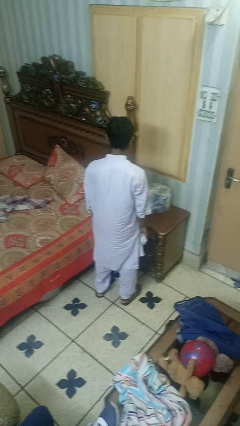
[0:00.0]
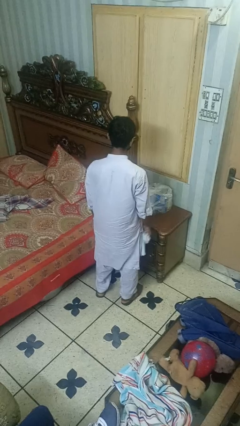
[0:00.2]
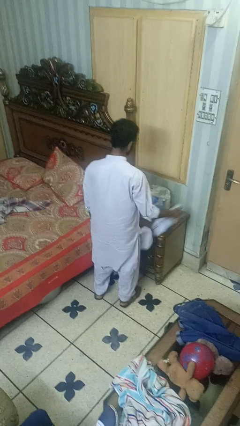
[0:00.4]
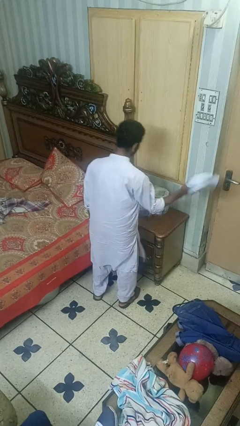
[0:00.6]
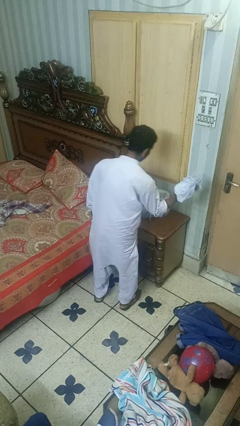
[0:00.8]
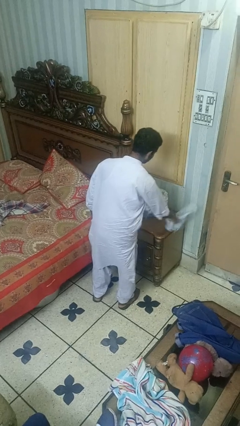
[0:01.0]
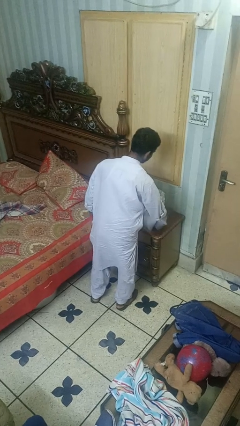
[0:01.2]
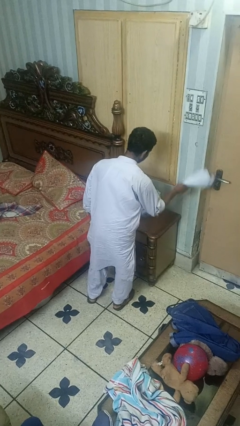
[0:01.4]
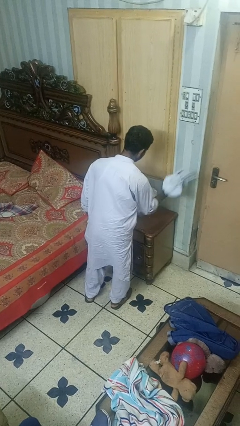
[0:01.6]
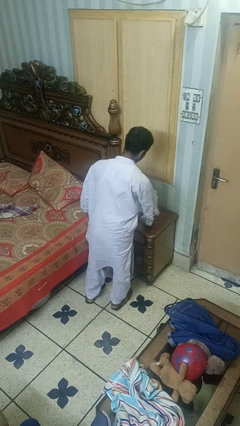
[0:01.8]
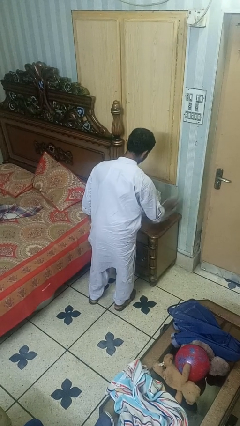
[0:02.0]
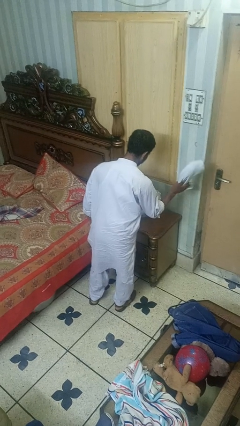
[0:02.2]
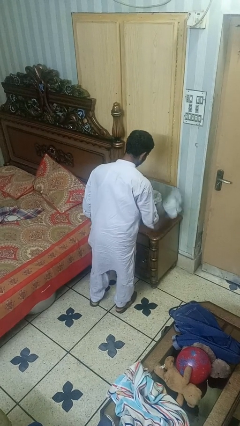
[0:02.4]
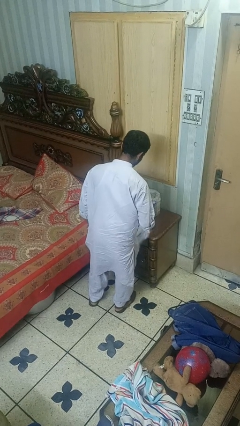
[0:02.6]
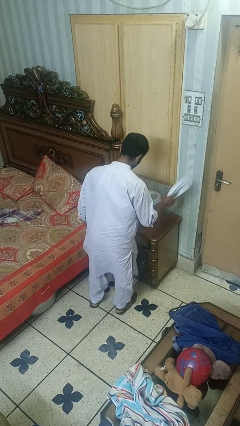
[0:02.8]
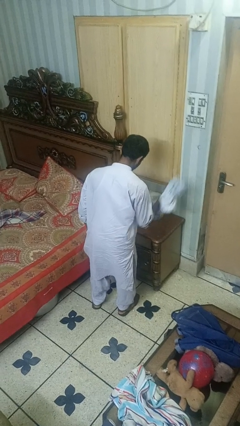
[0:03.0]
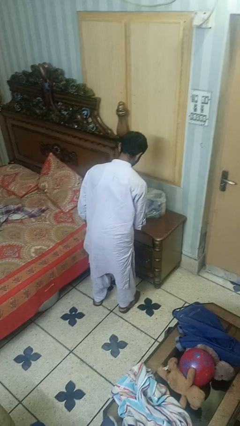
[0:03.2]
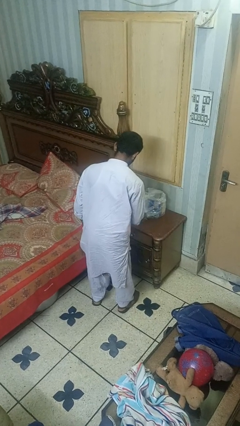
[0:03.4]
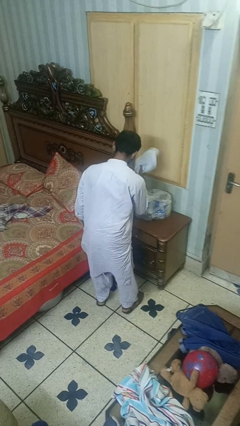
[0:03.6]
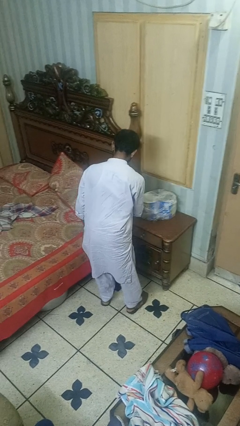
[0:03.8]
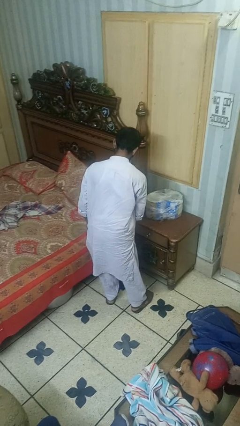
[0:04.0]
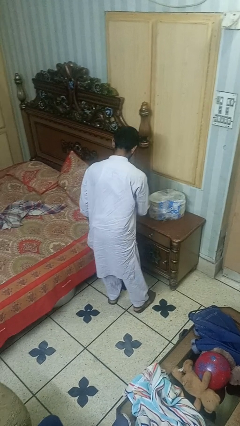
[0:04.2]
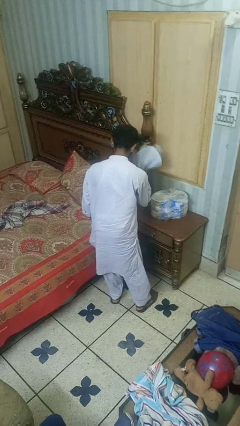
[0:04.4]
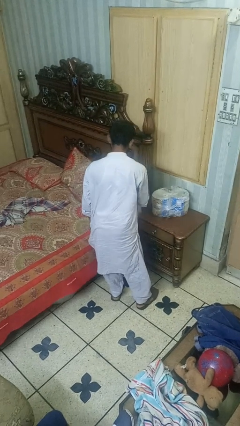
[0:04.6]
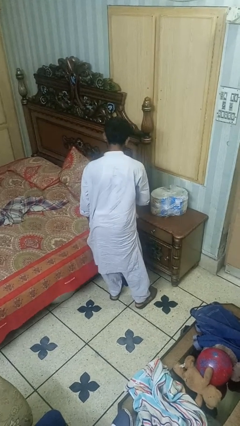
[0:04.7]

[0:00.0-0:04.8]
person dusts furniture

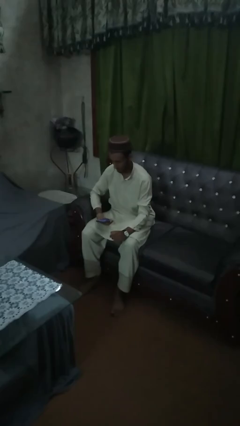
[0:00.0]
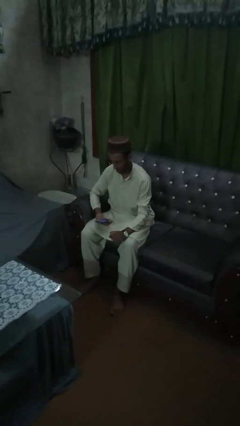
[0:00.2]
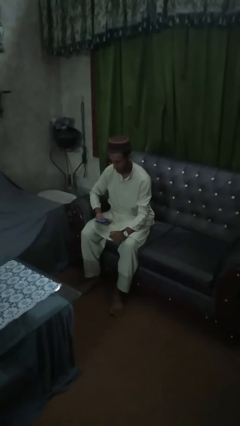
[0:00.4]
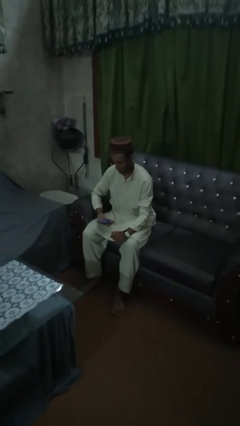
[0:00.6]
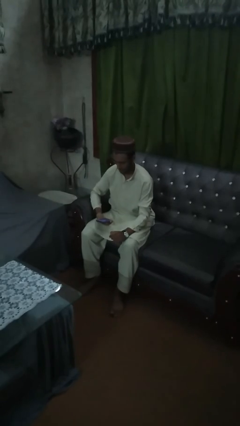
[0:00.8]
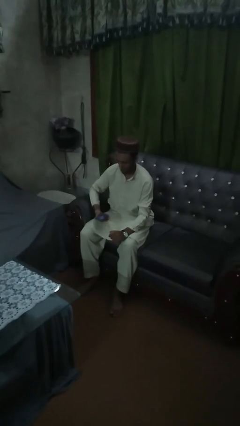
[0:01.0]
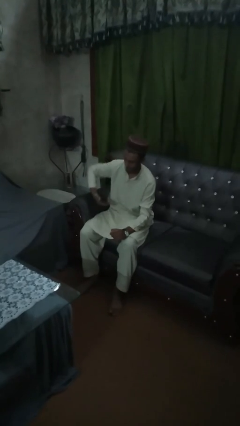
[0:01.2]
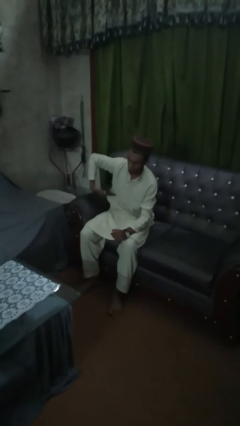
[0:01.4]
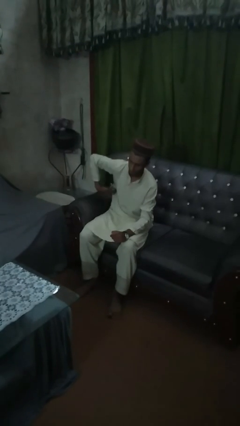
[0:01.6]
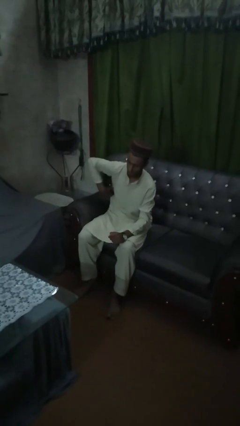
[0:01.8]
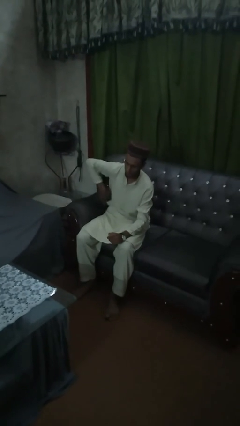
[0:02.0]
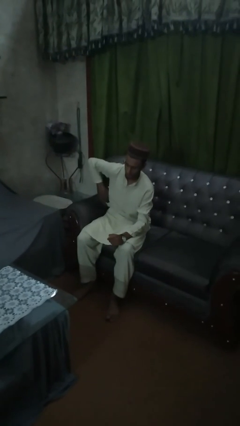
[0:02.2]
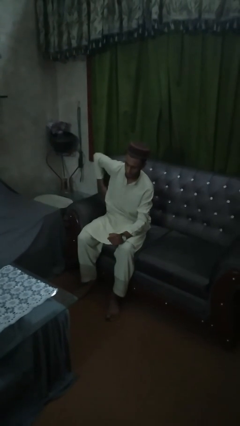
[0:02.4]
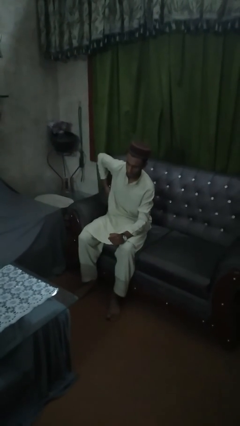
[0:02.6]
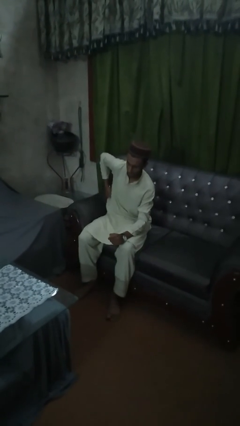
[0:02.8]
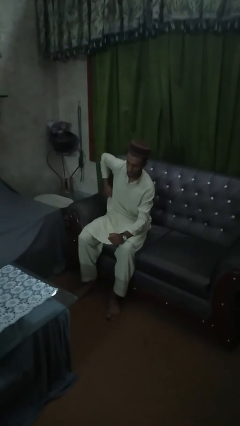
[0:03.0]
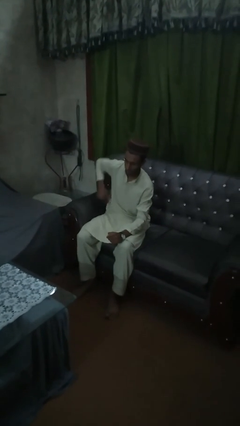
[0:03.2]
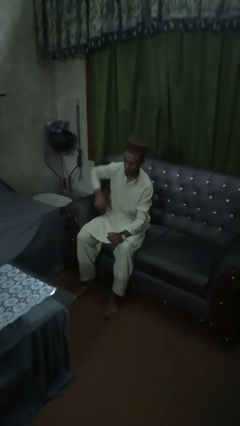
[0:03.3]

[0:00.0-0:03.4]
person puts phone into pocket

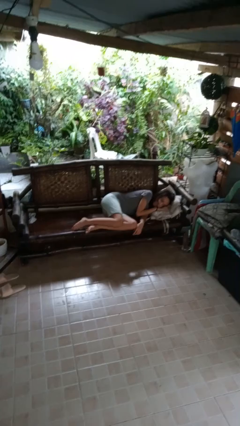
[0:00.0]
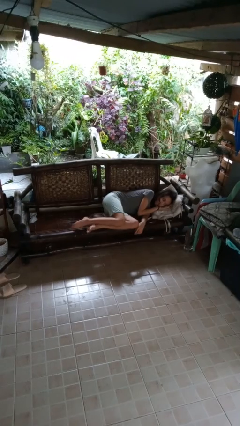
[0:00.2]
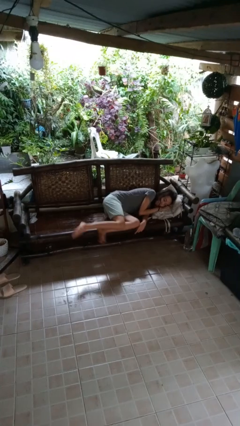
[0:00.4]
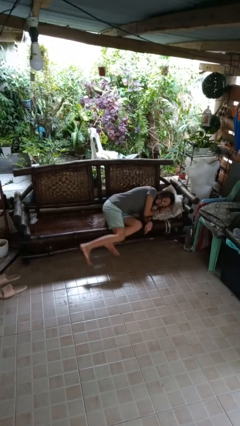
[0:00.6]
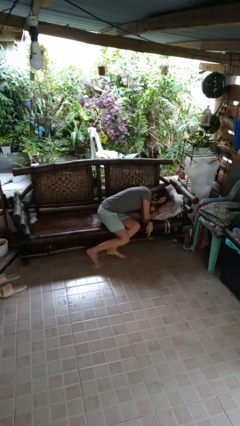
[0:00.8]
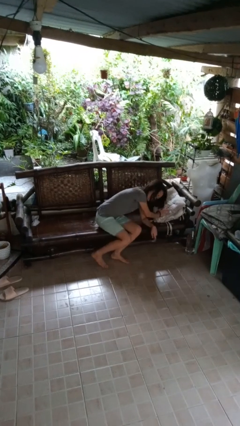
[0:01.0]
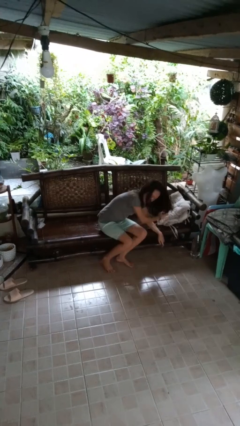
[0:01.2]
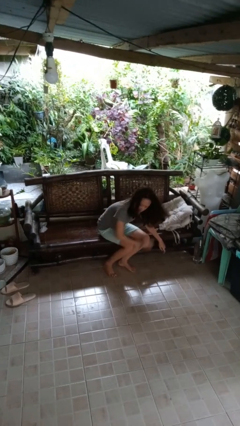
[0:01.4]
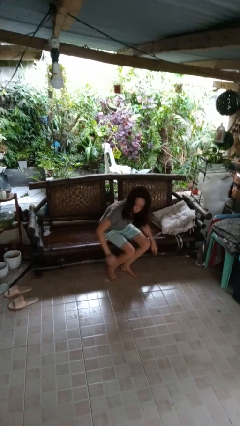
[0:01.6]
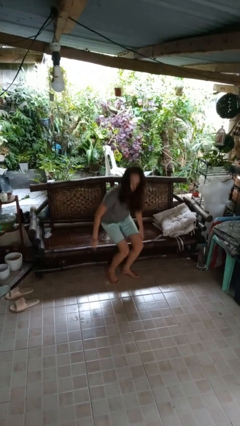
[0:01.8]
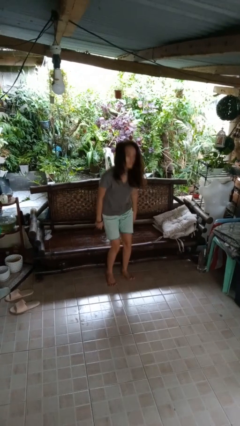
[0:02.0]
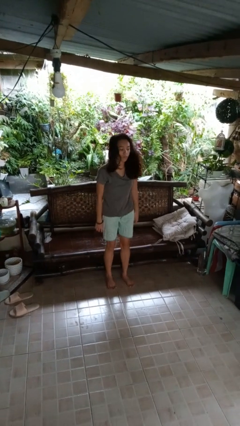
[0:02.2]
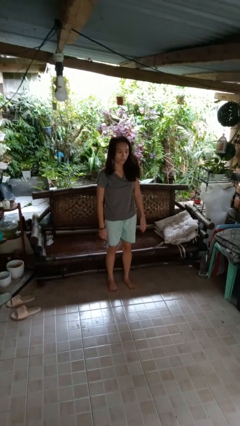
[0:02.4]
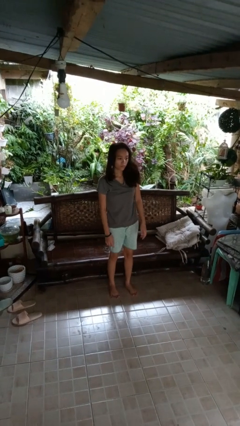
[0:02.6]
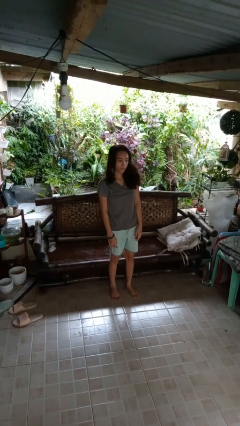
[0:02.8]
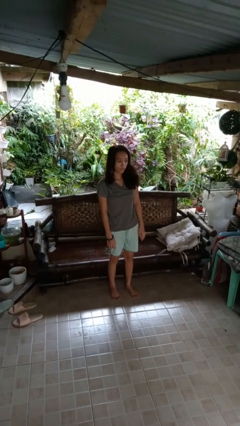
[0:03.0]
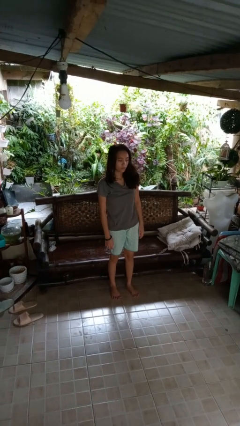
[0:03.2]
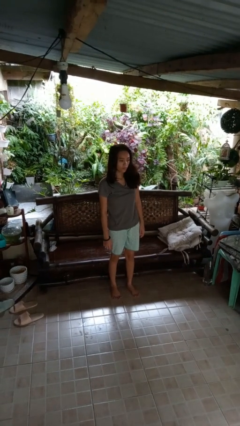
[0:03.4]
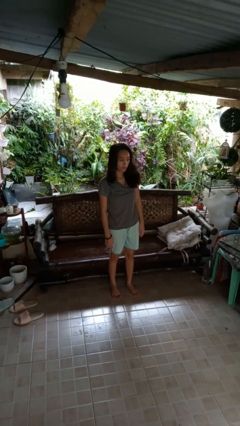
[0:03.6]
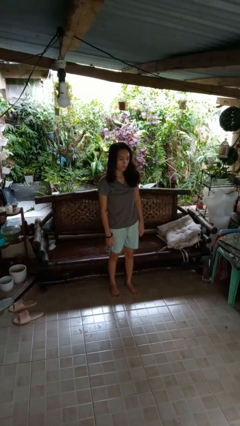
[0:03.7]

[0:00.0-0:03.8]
person stands up

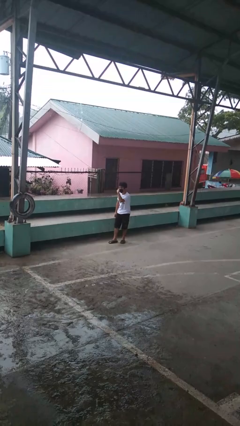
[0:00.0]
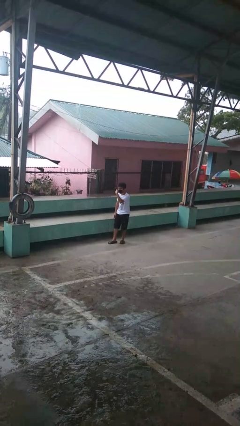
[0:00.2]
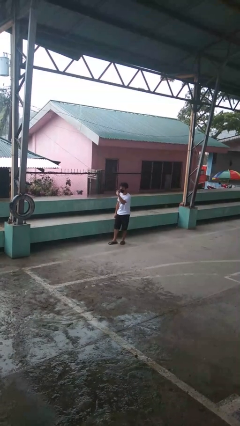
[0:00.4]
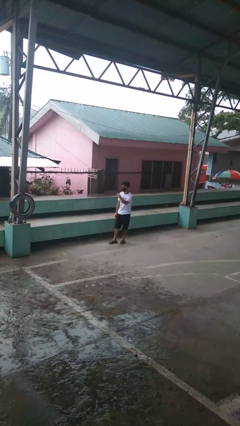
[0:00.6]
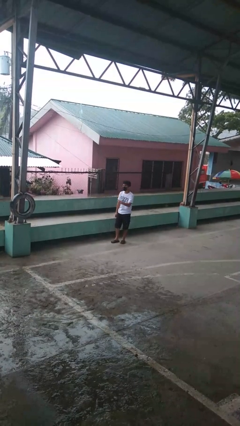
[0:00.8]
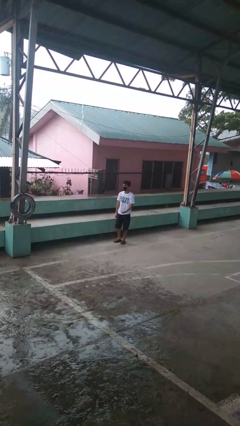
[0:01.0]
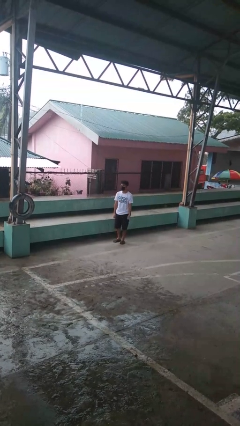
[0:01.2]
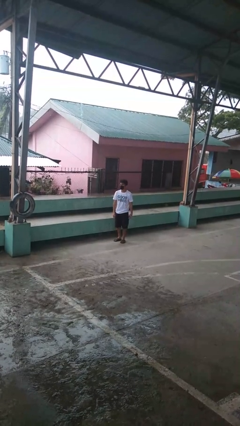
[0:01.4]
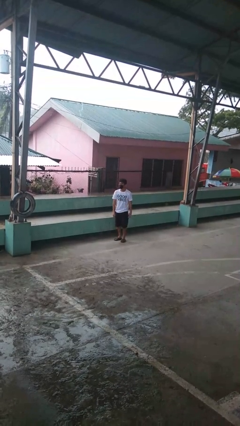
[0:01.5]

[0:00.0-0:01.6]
person gestures watch closely

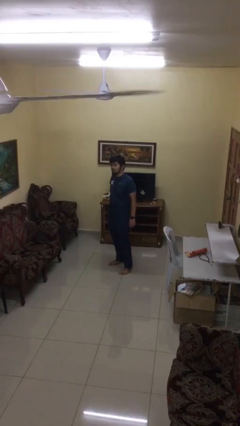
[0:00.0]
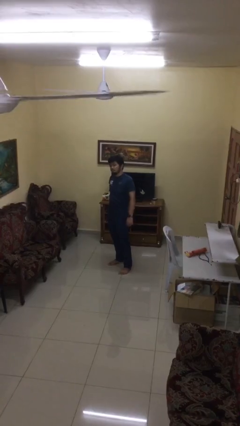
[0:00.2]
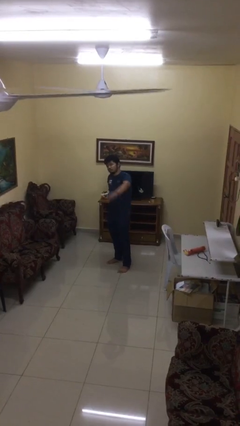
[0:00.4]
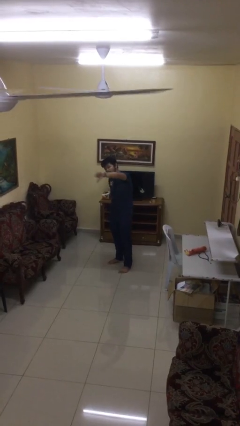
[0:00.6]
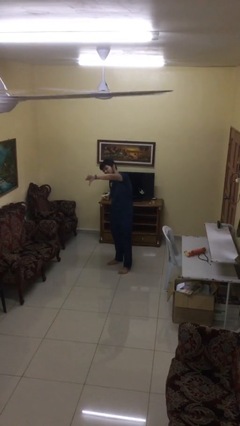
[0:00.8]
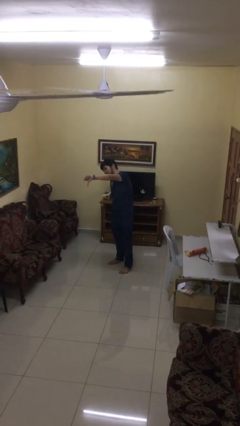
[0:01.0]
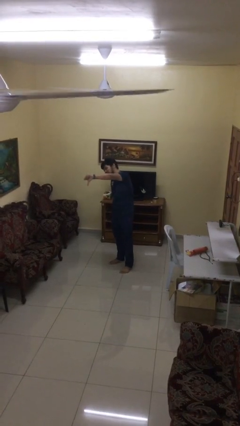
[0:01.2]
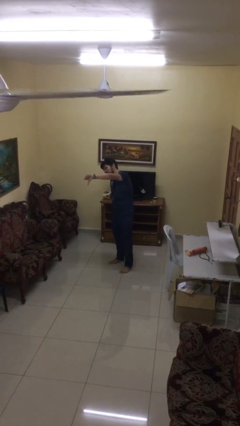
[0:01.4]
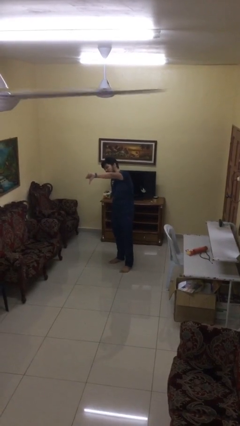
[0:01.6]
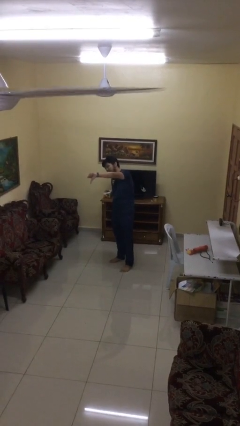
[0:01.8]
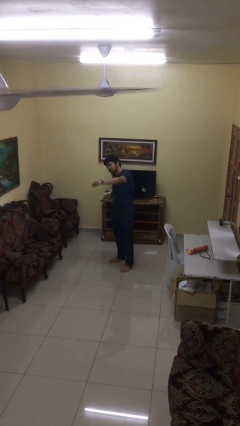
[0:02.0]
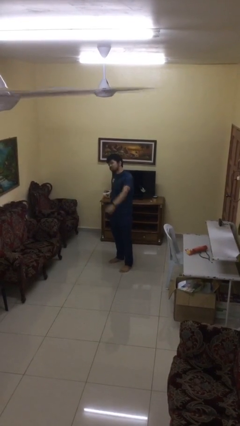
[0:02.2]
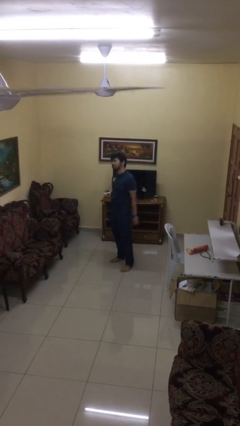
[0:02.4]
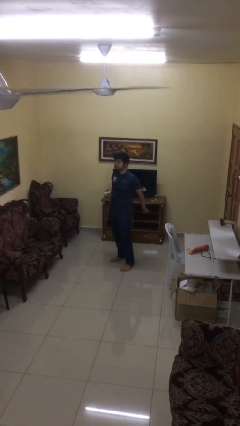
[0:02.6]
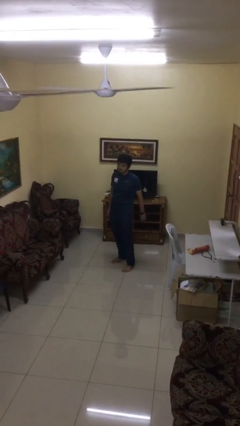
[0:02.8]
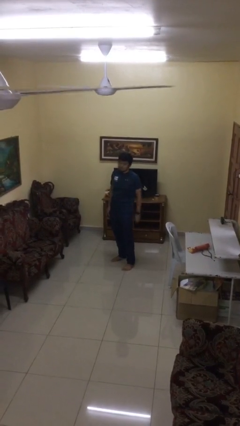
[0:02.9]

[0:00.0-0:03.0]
person gestures thumbs down

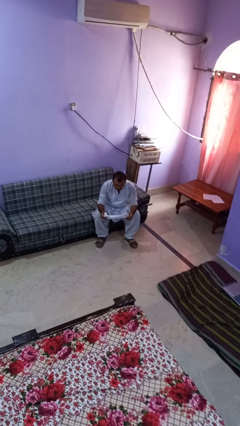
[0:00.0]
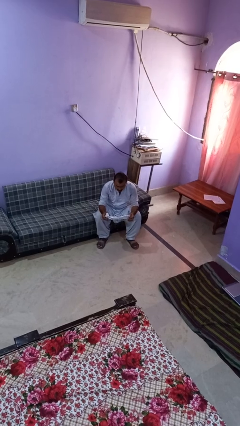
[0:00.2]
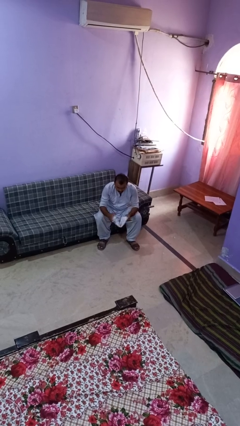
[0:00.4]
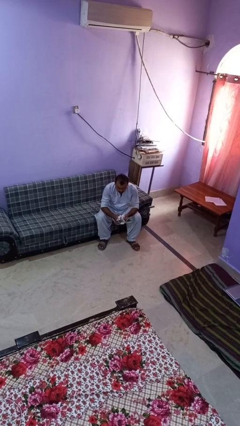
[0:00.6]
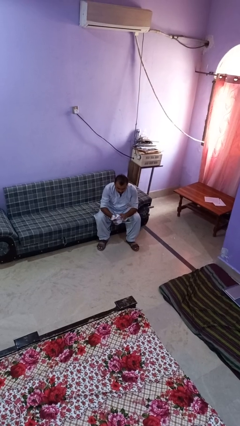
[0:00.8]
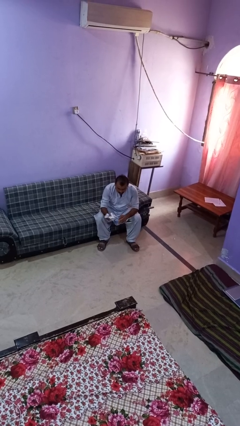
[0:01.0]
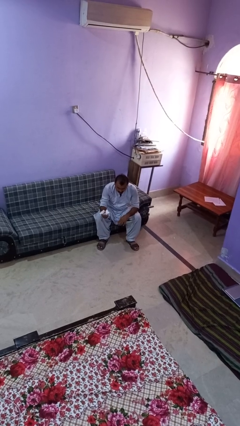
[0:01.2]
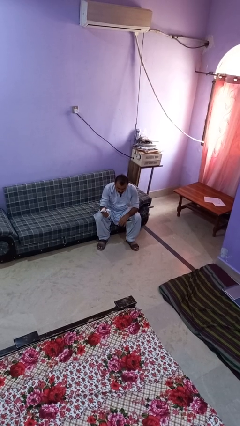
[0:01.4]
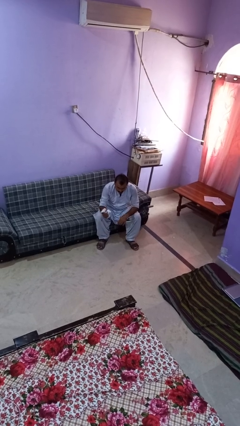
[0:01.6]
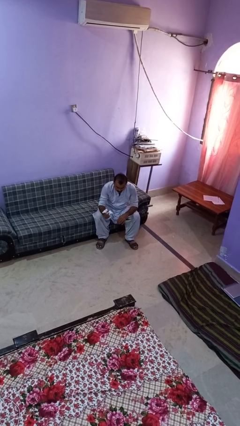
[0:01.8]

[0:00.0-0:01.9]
person crumples paper
